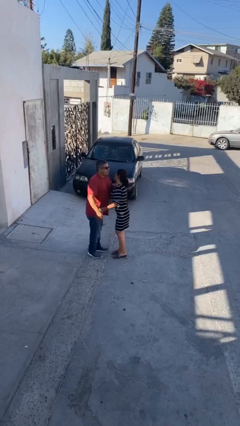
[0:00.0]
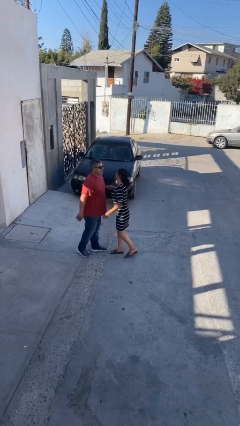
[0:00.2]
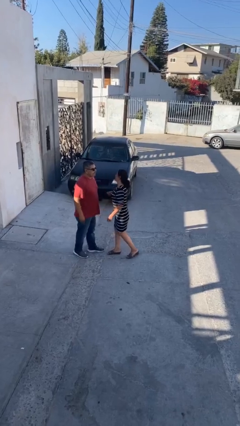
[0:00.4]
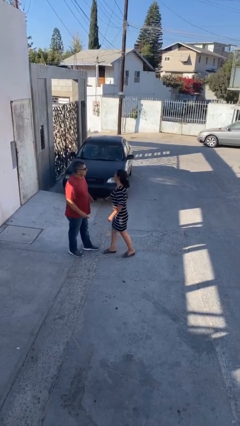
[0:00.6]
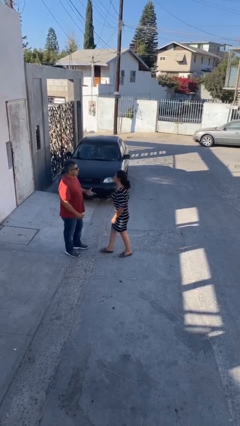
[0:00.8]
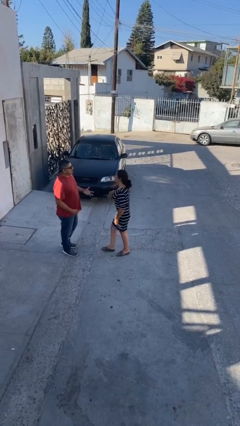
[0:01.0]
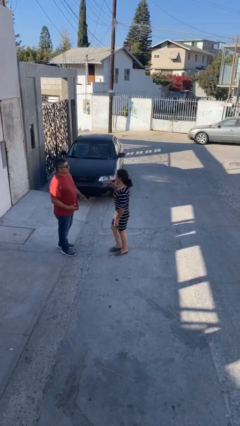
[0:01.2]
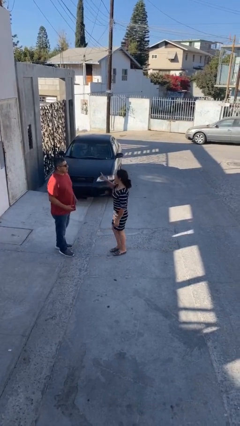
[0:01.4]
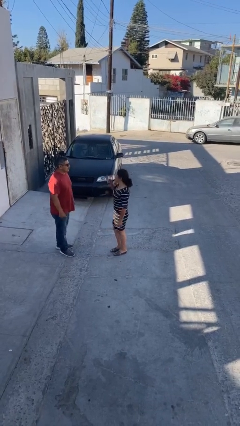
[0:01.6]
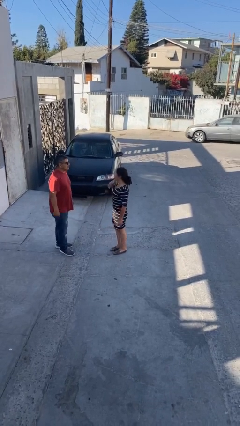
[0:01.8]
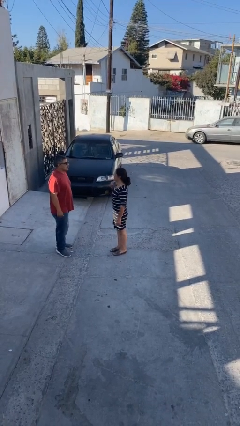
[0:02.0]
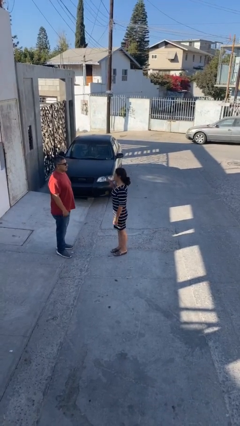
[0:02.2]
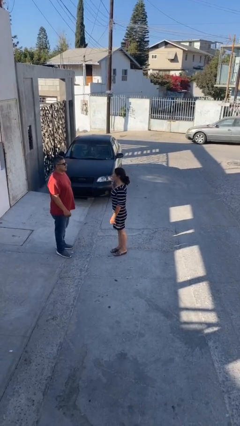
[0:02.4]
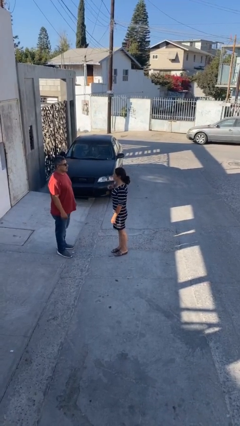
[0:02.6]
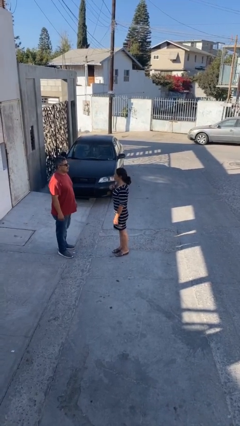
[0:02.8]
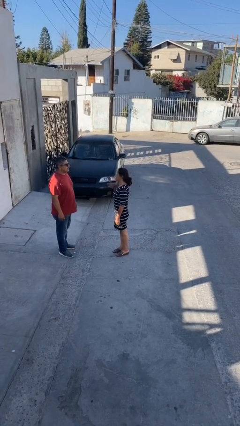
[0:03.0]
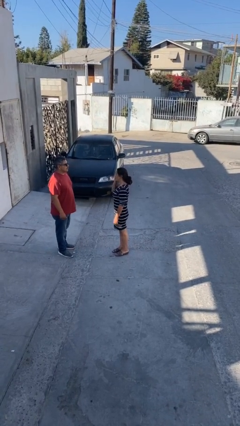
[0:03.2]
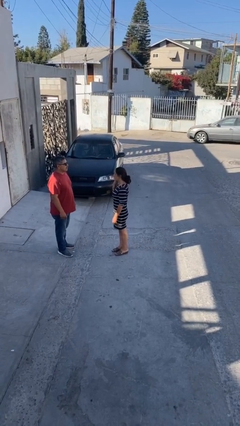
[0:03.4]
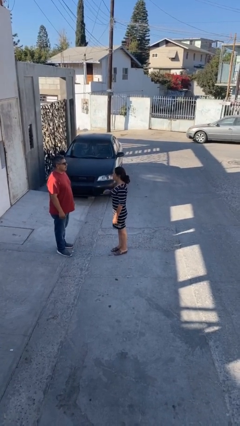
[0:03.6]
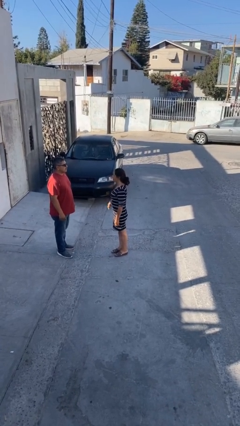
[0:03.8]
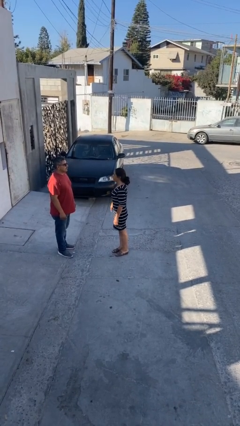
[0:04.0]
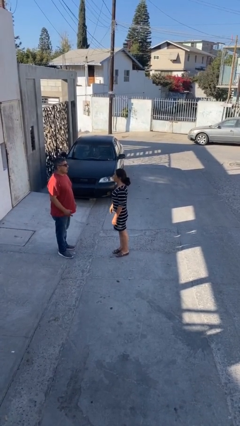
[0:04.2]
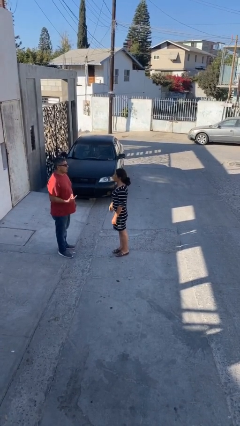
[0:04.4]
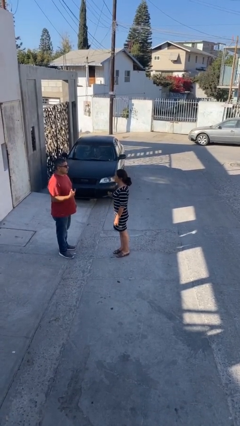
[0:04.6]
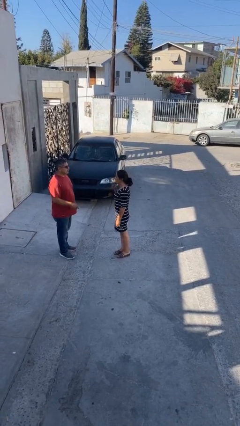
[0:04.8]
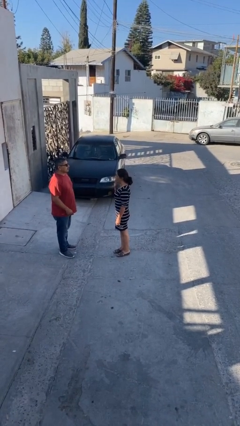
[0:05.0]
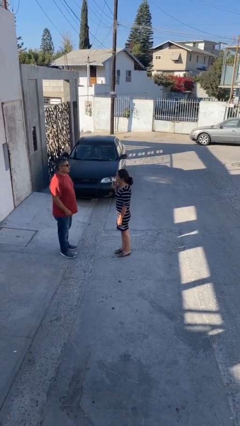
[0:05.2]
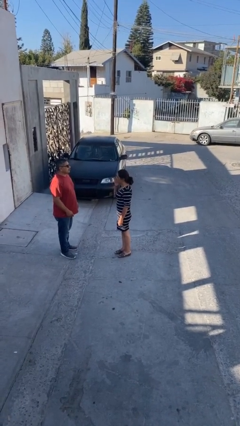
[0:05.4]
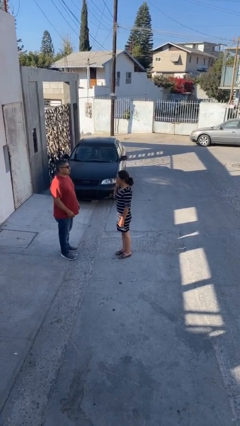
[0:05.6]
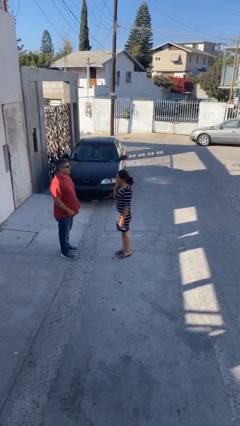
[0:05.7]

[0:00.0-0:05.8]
person talks to person

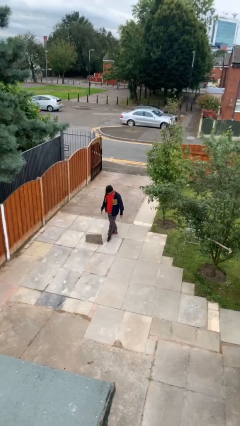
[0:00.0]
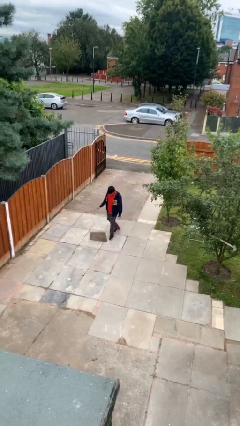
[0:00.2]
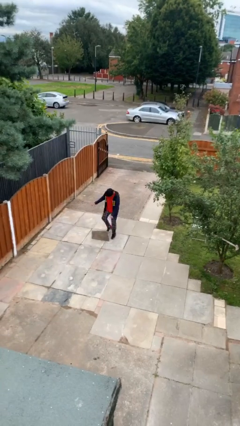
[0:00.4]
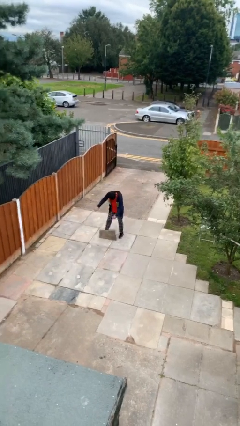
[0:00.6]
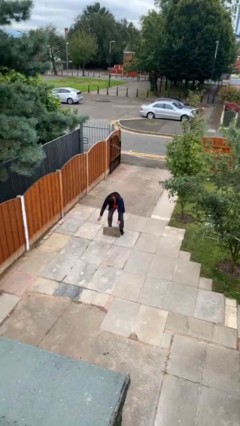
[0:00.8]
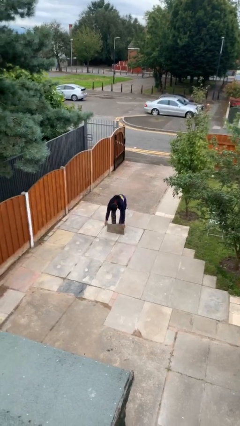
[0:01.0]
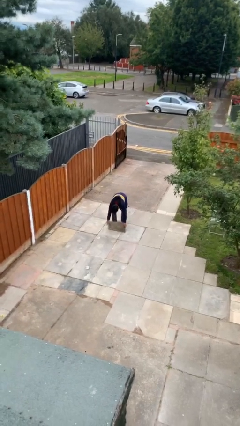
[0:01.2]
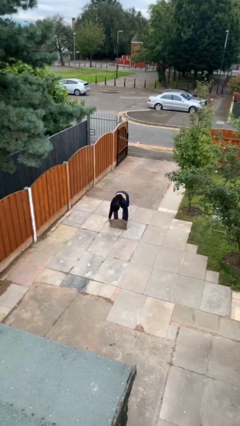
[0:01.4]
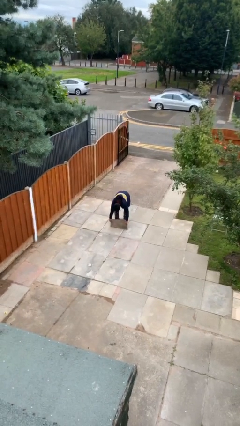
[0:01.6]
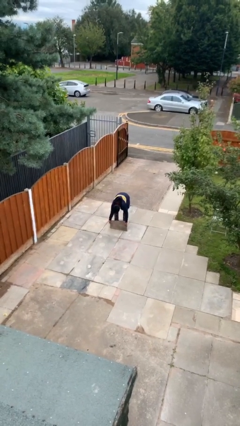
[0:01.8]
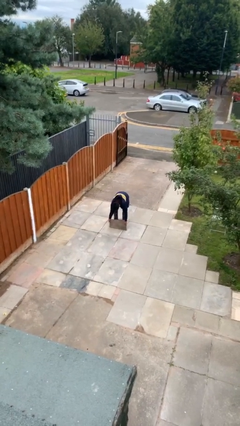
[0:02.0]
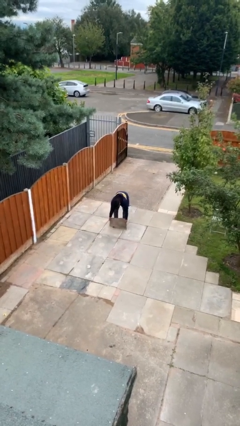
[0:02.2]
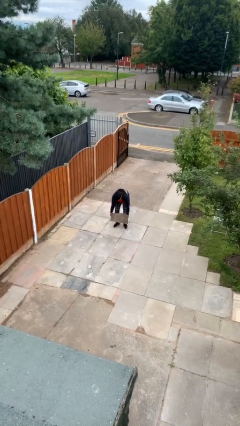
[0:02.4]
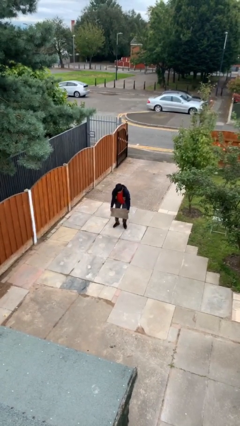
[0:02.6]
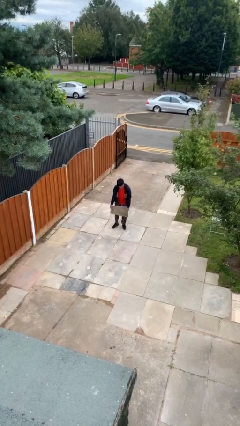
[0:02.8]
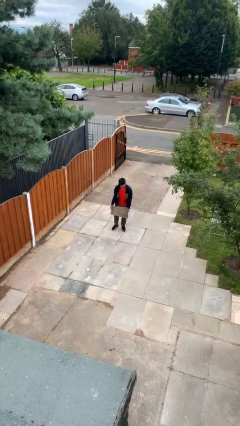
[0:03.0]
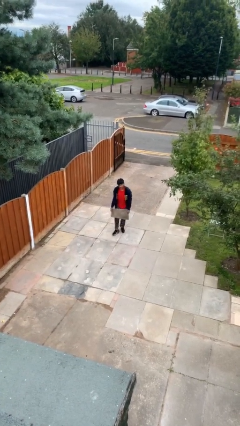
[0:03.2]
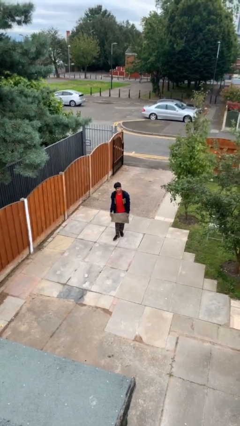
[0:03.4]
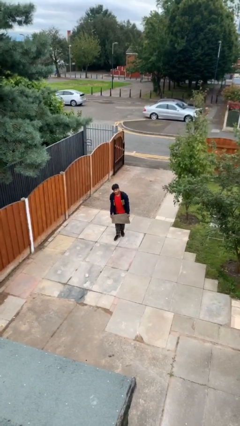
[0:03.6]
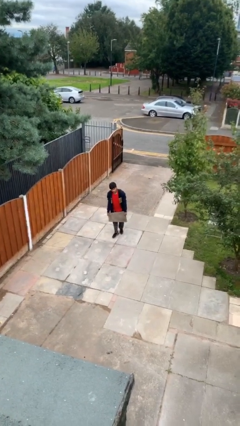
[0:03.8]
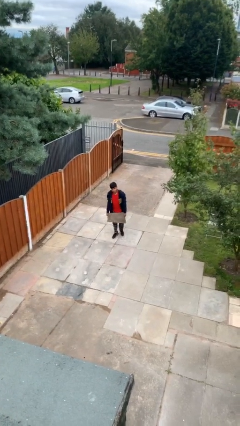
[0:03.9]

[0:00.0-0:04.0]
person picks up object from floor

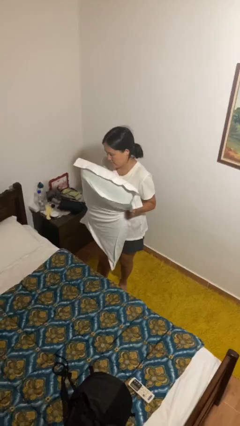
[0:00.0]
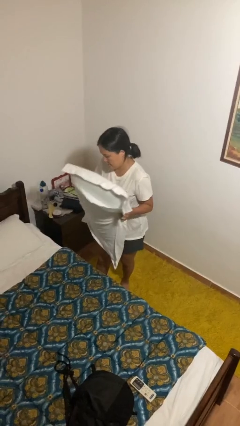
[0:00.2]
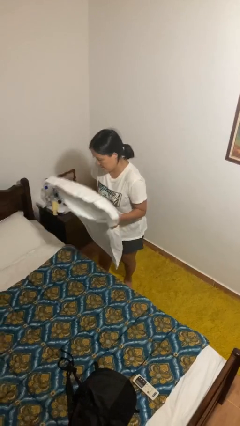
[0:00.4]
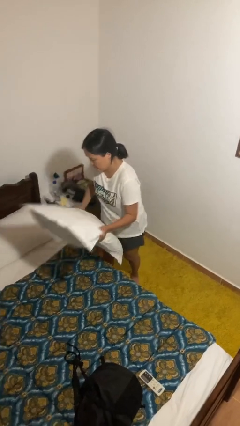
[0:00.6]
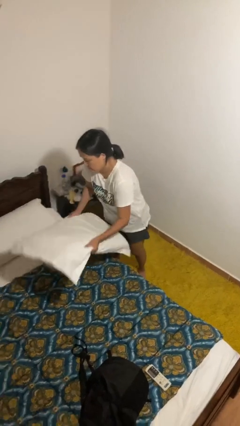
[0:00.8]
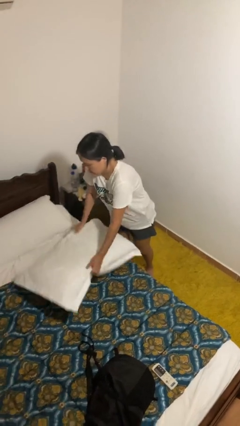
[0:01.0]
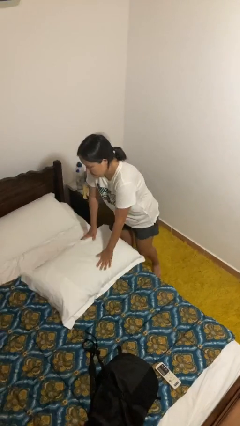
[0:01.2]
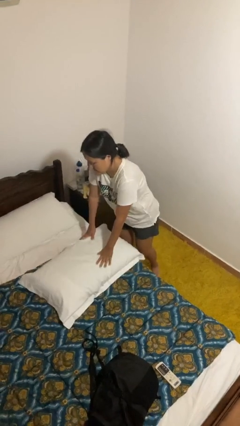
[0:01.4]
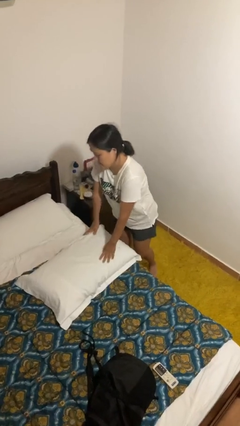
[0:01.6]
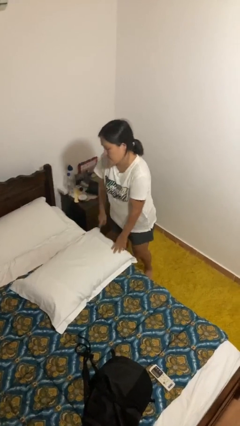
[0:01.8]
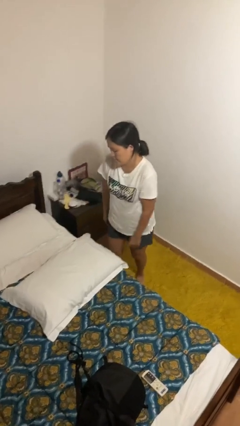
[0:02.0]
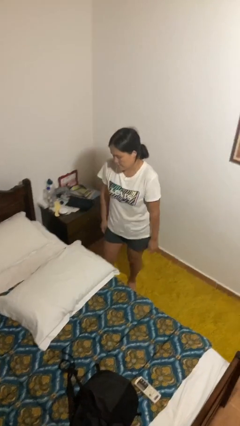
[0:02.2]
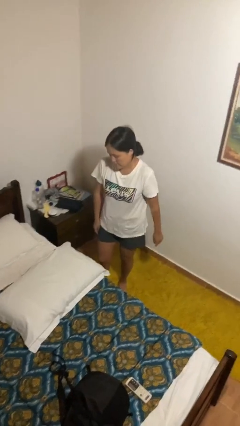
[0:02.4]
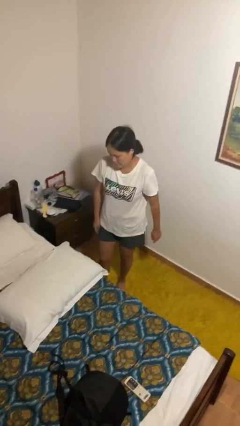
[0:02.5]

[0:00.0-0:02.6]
person puts down object on bed

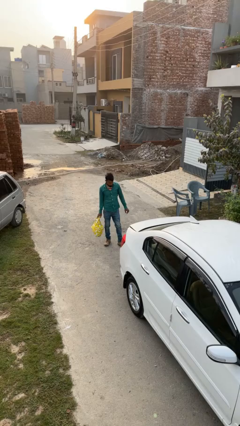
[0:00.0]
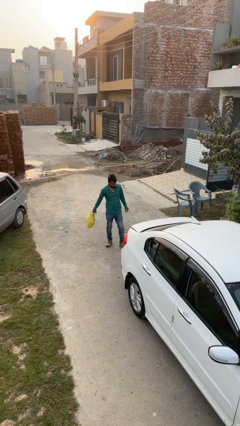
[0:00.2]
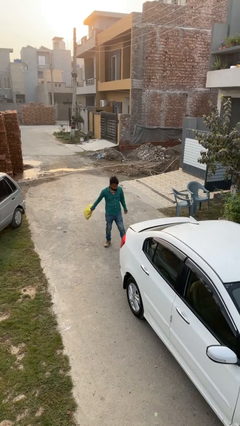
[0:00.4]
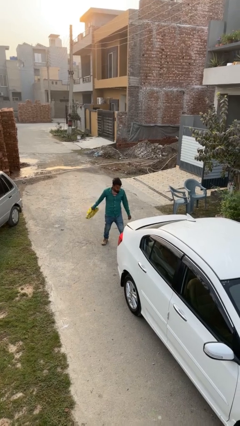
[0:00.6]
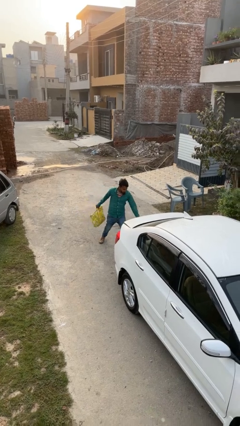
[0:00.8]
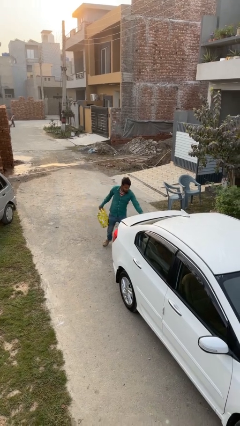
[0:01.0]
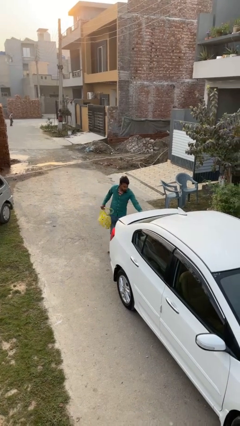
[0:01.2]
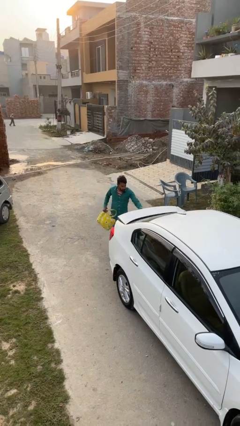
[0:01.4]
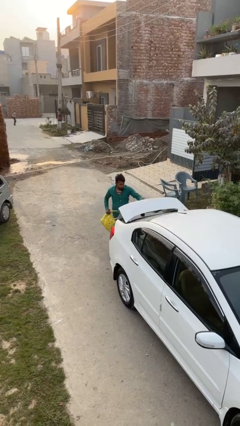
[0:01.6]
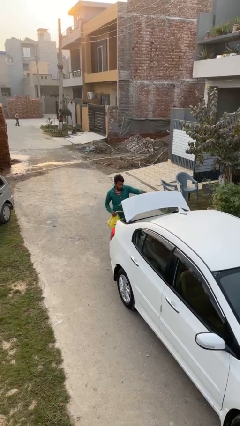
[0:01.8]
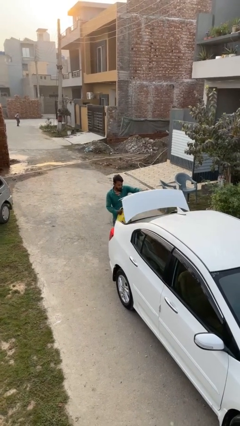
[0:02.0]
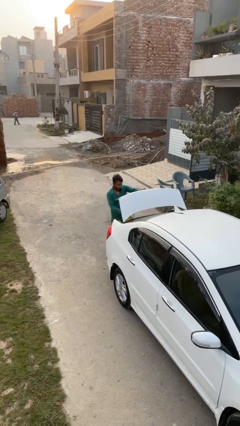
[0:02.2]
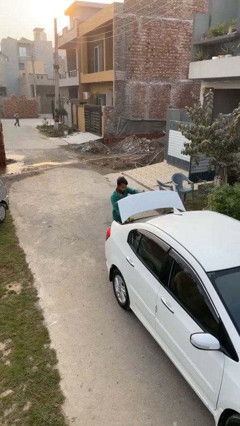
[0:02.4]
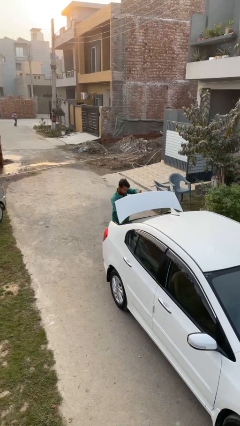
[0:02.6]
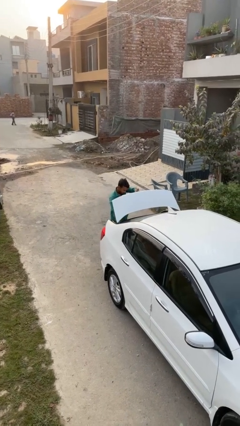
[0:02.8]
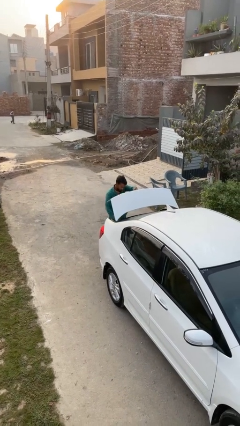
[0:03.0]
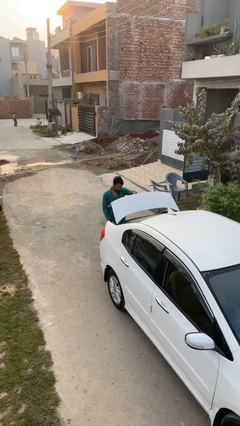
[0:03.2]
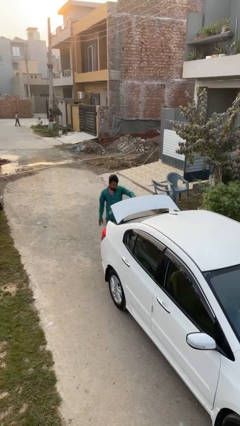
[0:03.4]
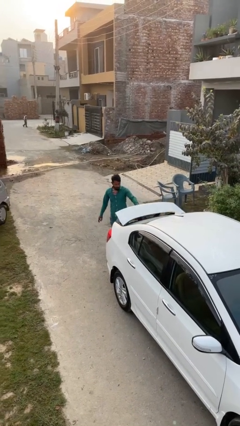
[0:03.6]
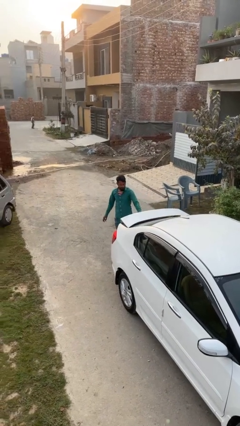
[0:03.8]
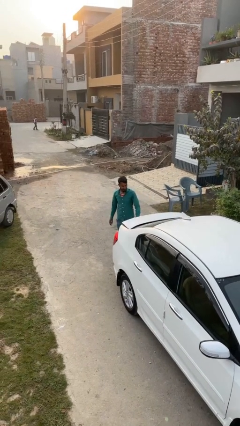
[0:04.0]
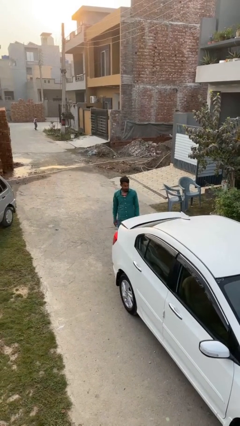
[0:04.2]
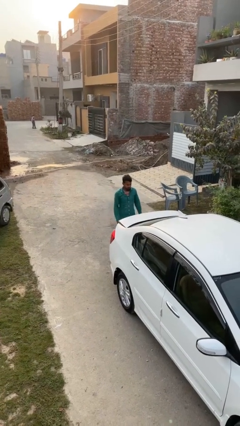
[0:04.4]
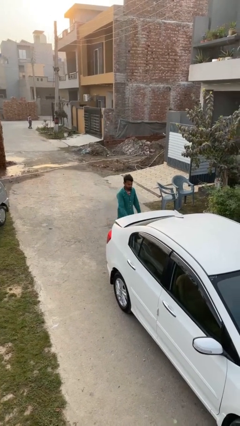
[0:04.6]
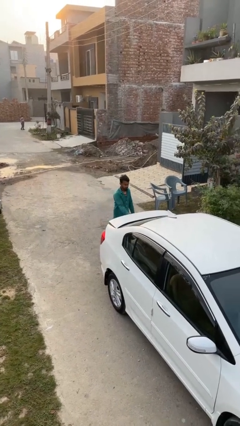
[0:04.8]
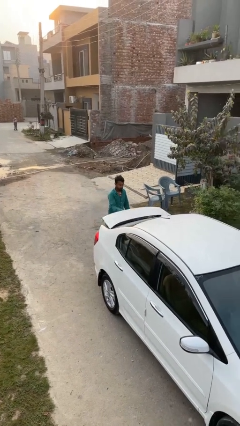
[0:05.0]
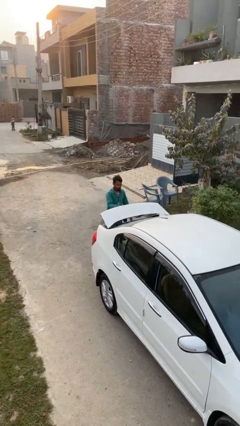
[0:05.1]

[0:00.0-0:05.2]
person loads car

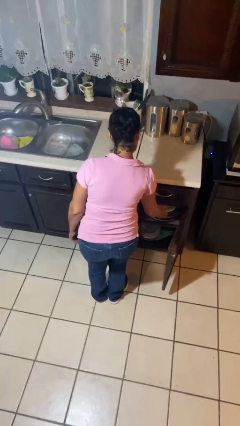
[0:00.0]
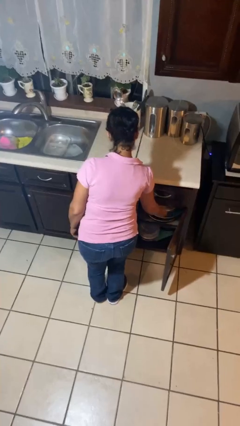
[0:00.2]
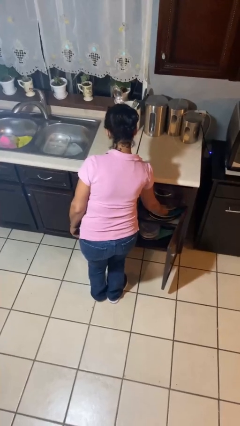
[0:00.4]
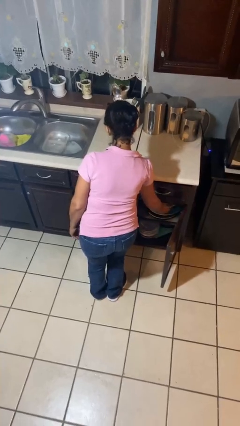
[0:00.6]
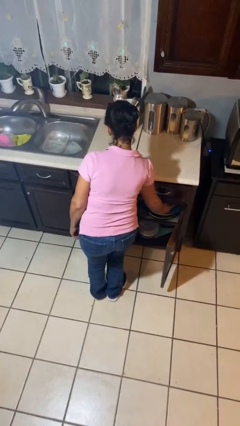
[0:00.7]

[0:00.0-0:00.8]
person takes object from cabinet
